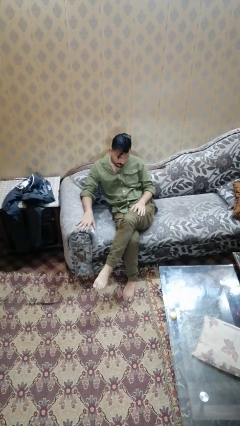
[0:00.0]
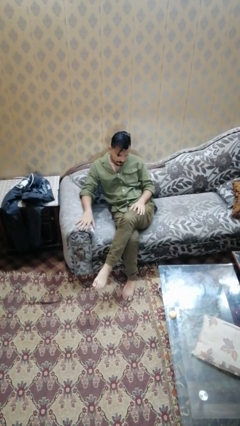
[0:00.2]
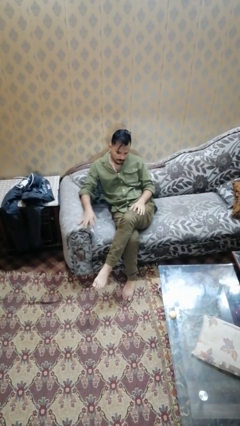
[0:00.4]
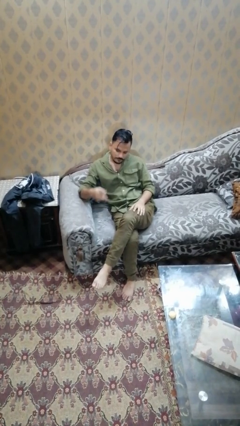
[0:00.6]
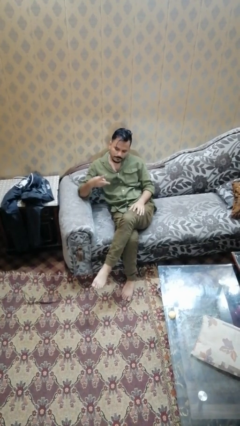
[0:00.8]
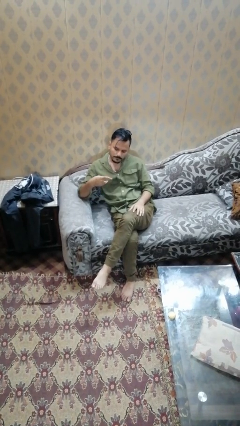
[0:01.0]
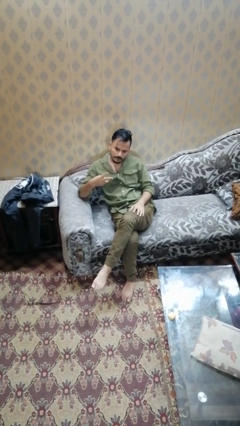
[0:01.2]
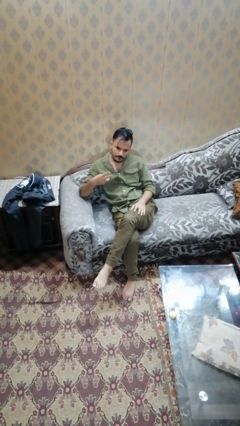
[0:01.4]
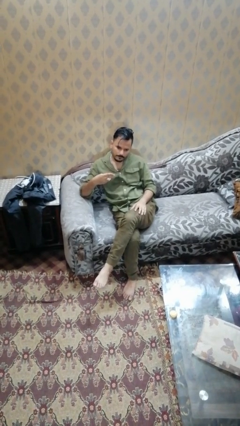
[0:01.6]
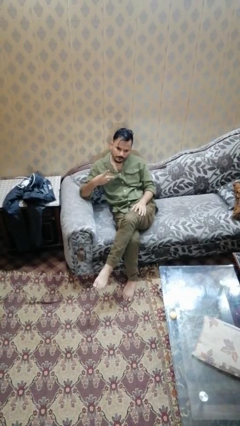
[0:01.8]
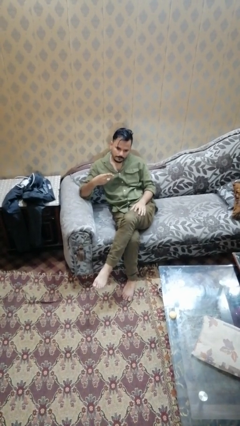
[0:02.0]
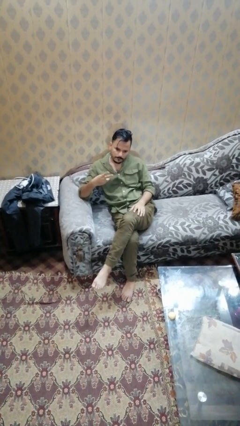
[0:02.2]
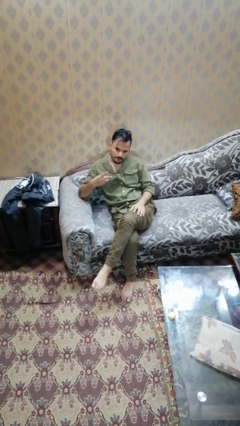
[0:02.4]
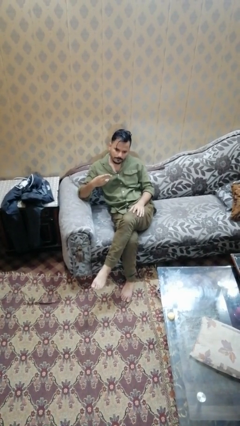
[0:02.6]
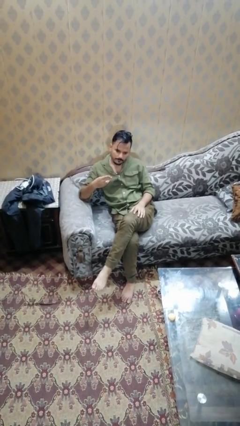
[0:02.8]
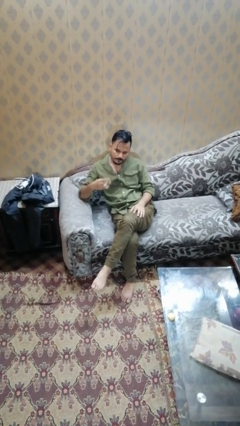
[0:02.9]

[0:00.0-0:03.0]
person gestures cut

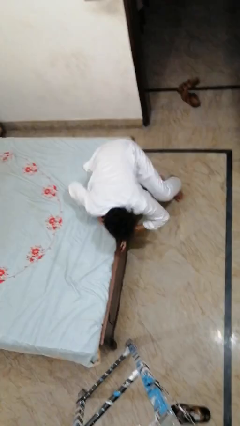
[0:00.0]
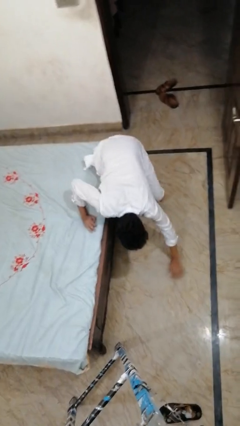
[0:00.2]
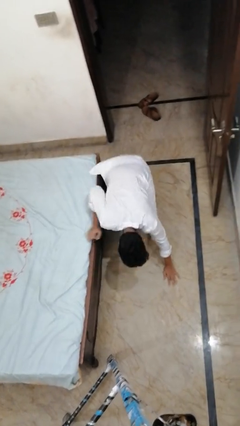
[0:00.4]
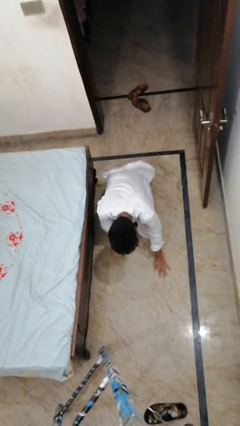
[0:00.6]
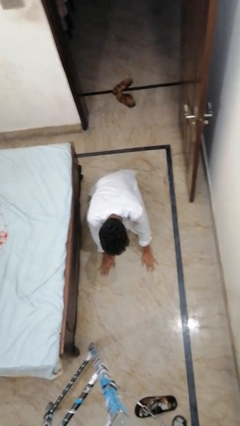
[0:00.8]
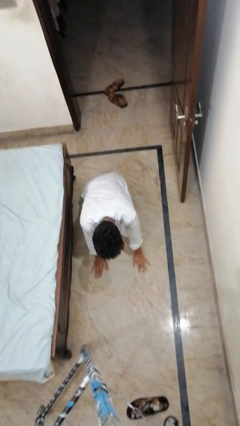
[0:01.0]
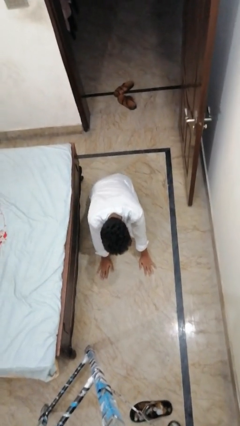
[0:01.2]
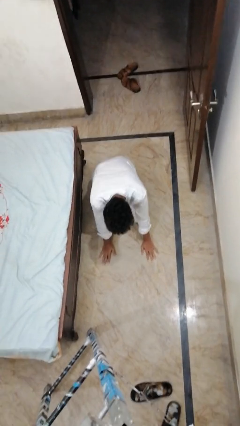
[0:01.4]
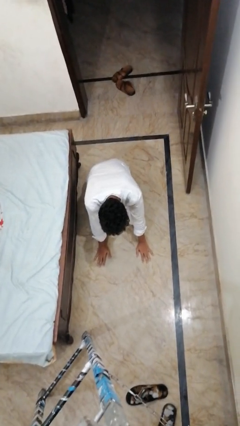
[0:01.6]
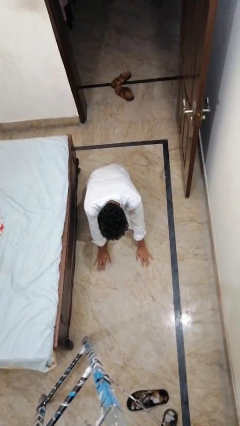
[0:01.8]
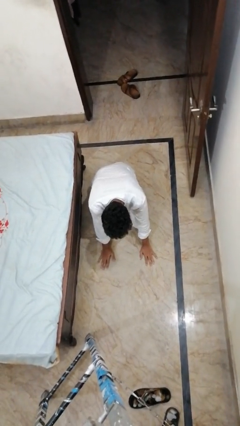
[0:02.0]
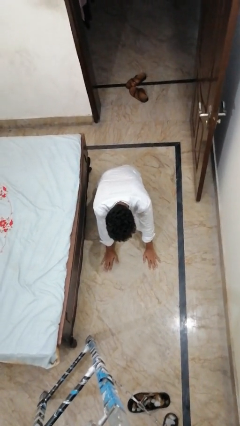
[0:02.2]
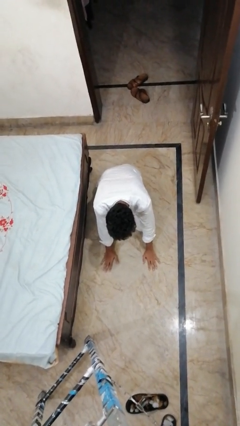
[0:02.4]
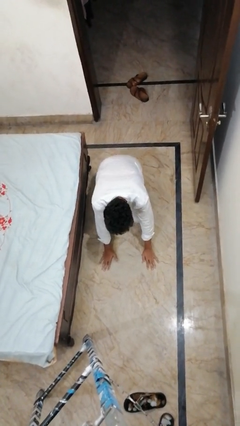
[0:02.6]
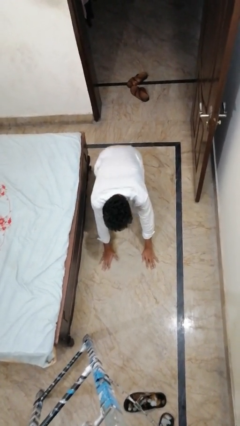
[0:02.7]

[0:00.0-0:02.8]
person falls from bed

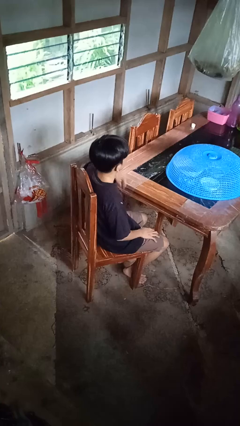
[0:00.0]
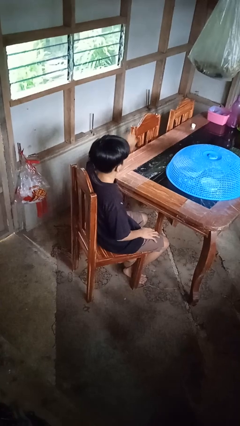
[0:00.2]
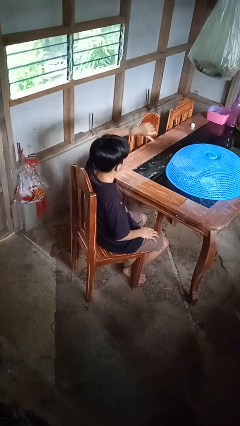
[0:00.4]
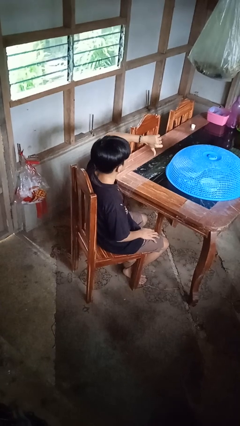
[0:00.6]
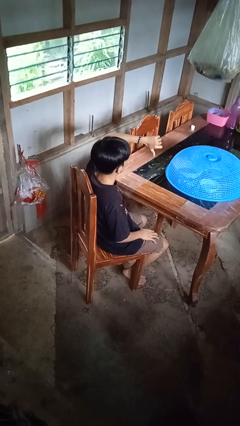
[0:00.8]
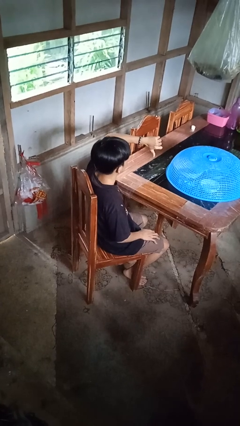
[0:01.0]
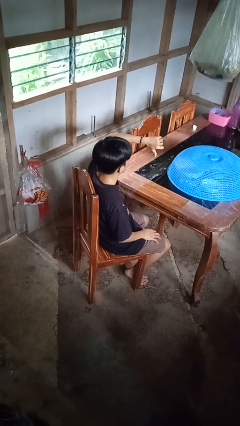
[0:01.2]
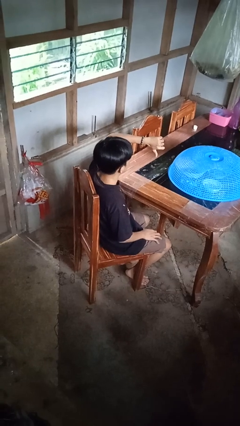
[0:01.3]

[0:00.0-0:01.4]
person gestures thumbs down

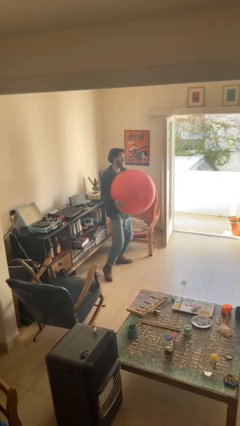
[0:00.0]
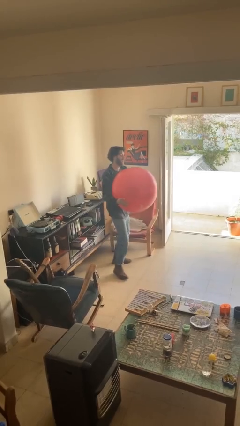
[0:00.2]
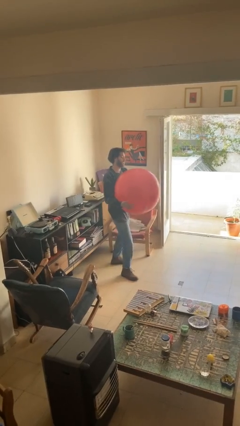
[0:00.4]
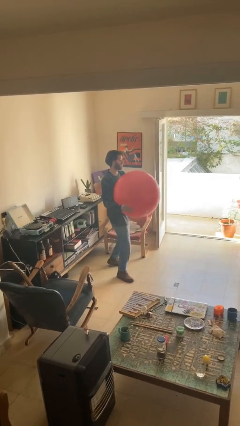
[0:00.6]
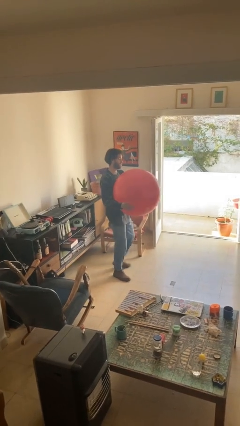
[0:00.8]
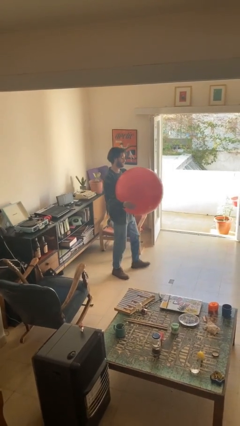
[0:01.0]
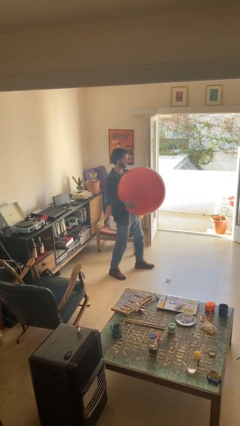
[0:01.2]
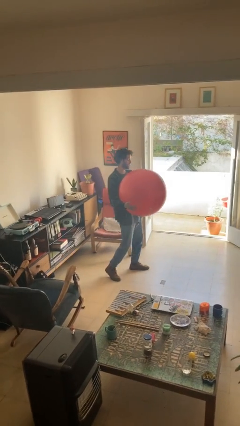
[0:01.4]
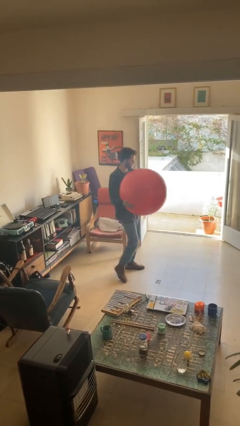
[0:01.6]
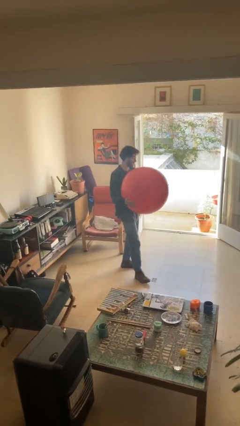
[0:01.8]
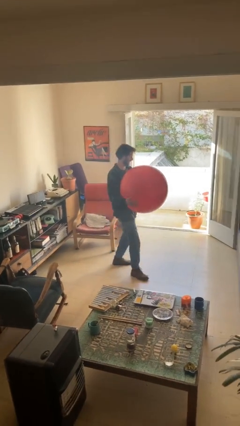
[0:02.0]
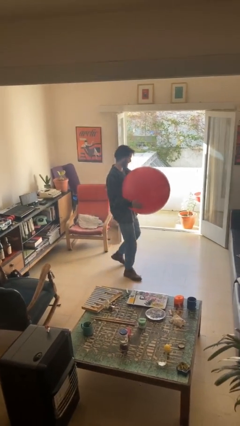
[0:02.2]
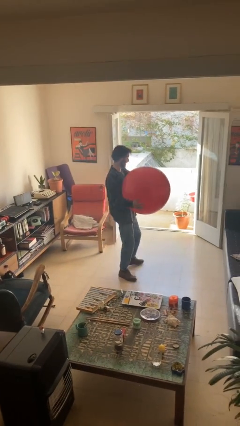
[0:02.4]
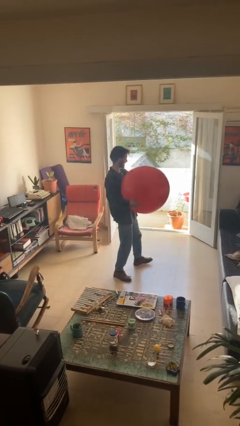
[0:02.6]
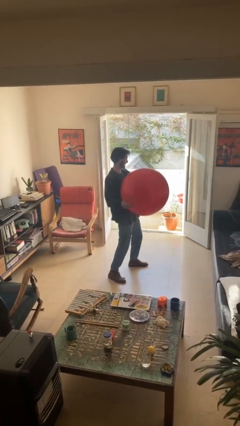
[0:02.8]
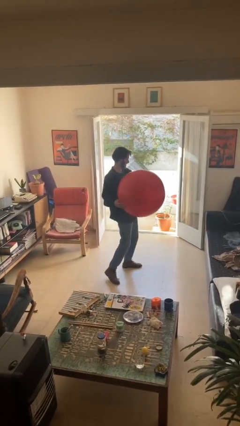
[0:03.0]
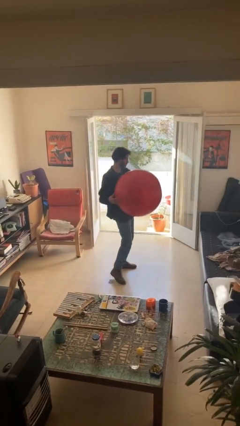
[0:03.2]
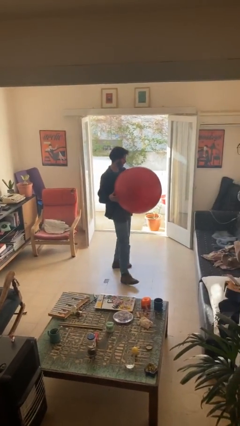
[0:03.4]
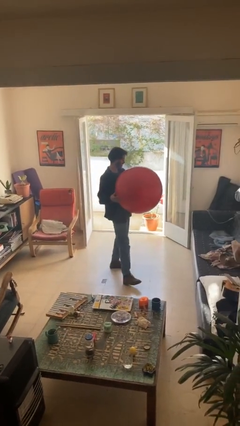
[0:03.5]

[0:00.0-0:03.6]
person carries heavy object

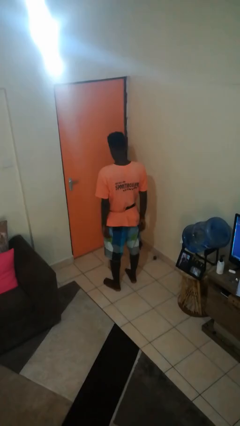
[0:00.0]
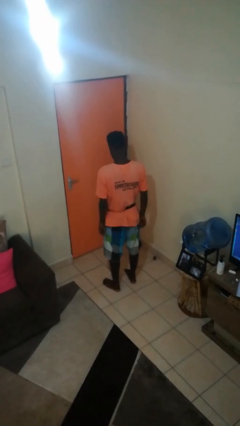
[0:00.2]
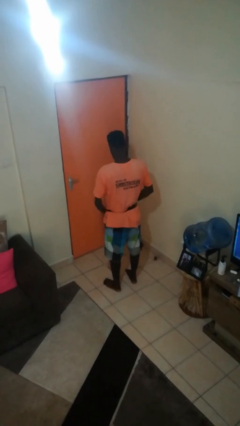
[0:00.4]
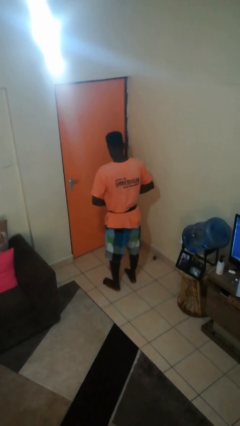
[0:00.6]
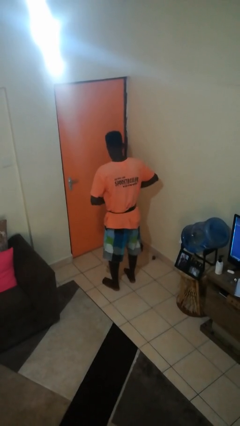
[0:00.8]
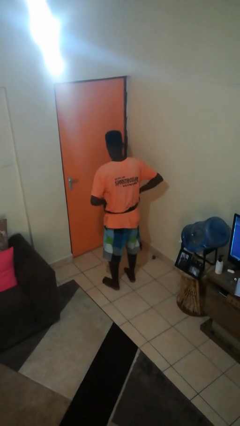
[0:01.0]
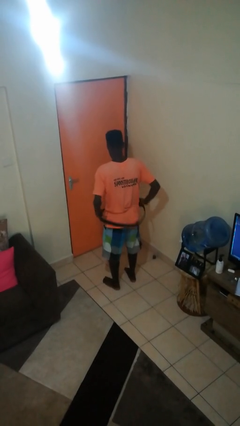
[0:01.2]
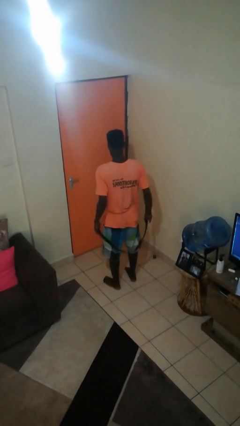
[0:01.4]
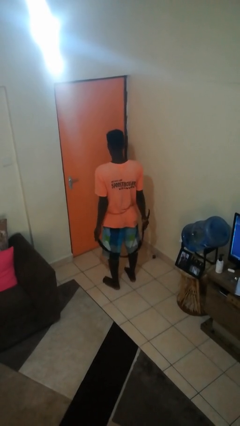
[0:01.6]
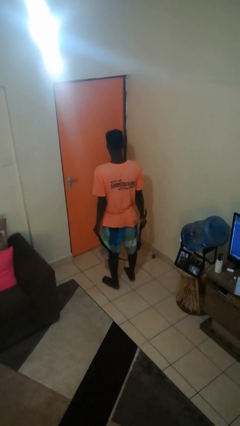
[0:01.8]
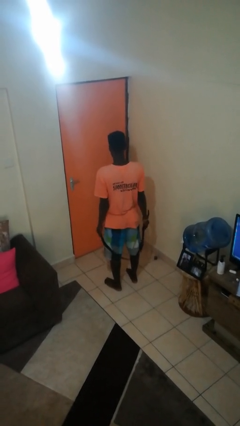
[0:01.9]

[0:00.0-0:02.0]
person takes off belt

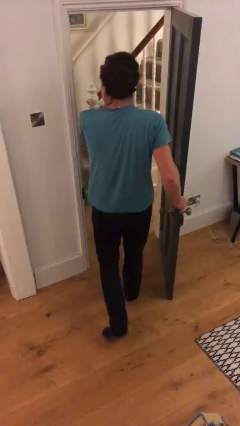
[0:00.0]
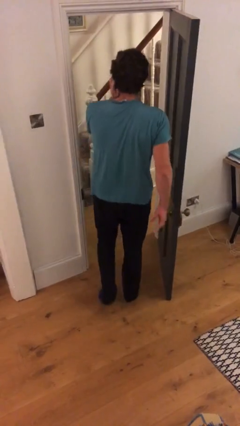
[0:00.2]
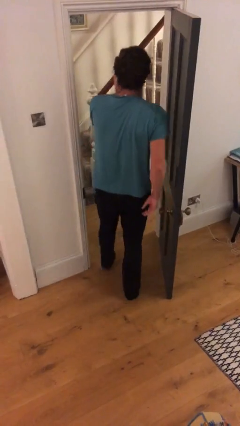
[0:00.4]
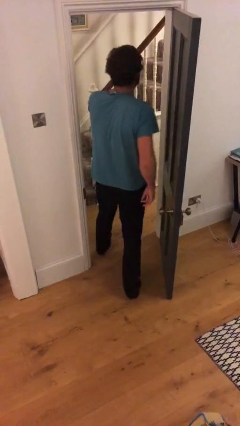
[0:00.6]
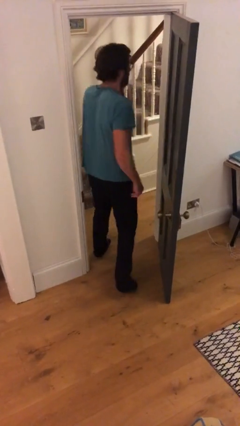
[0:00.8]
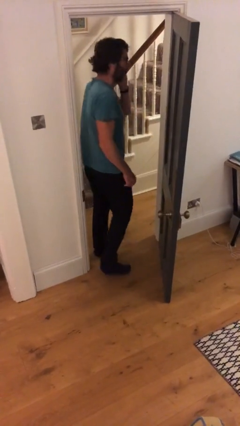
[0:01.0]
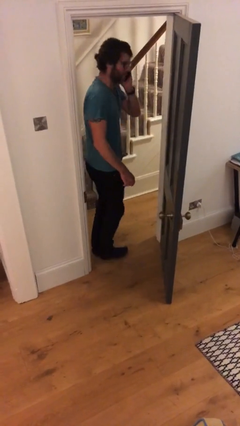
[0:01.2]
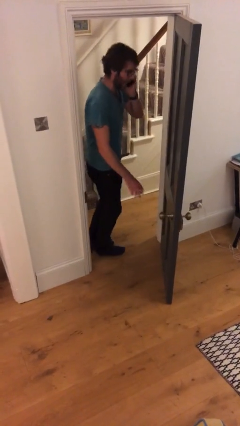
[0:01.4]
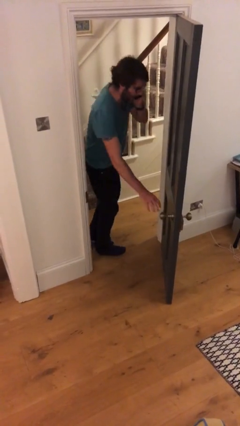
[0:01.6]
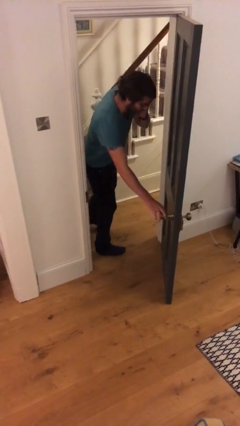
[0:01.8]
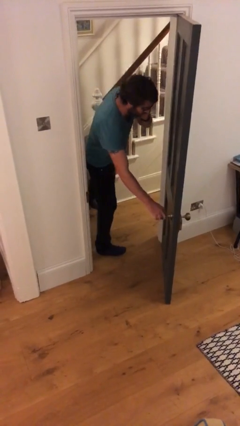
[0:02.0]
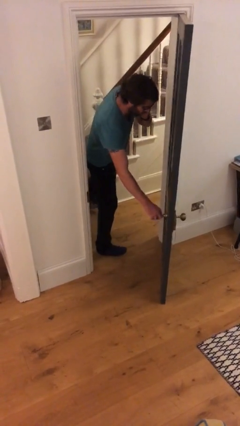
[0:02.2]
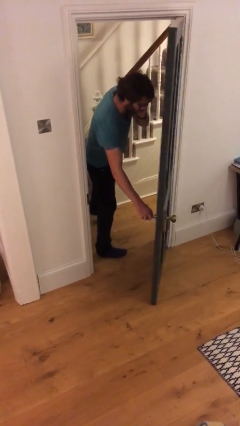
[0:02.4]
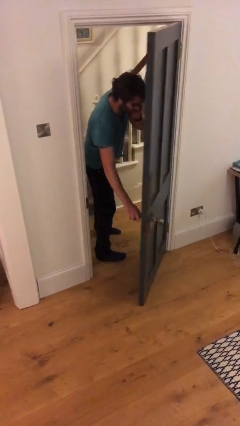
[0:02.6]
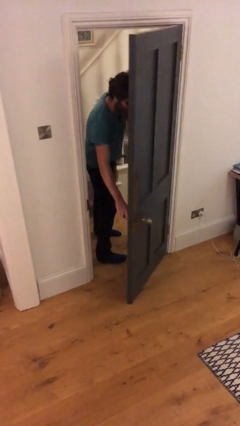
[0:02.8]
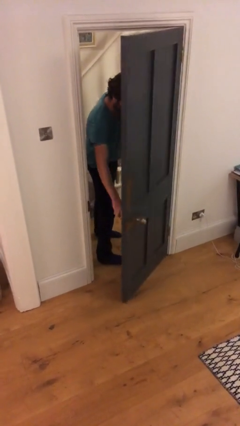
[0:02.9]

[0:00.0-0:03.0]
person exits scene through structure

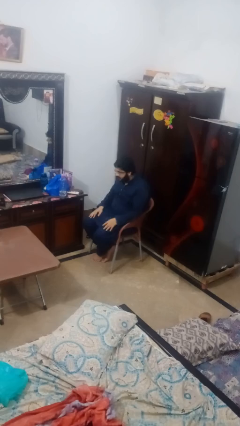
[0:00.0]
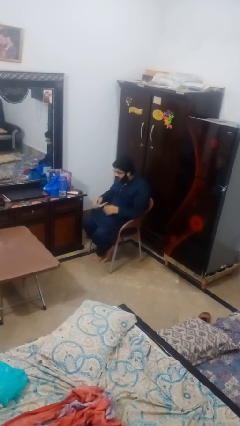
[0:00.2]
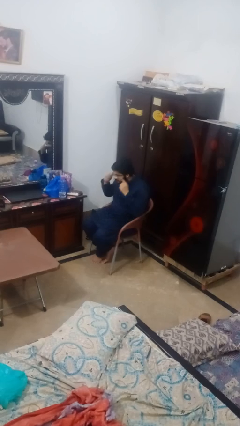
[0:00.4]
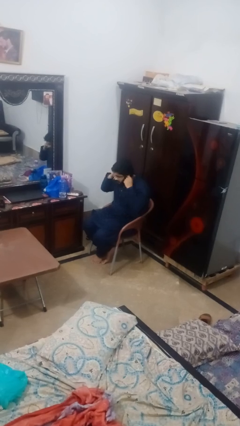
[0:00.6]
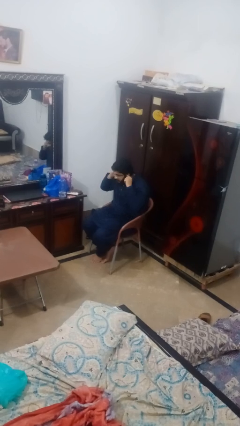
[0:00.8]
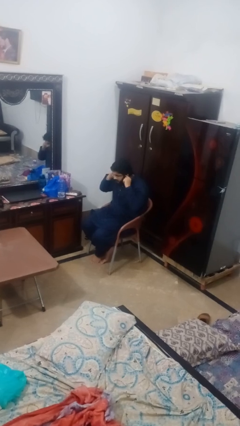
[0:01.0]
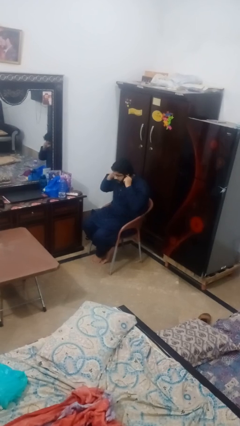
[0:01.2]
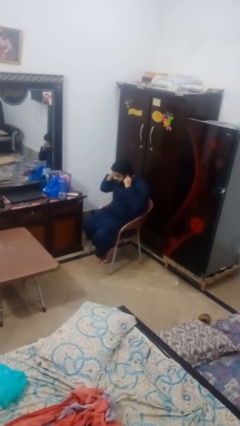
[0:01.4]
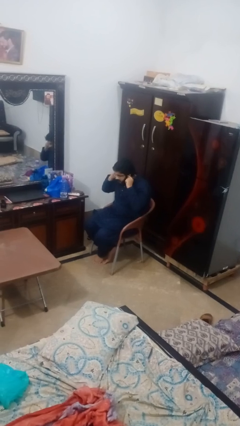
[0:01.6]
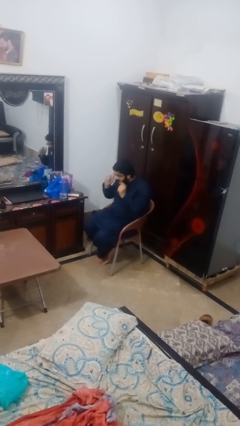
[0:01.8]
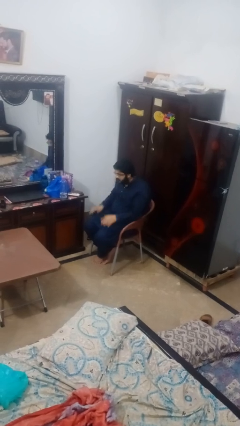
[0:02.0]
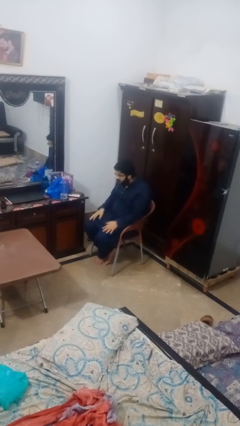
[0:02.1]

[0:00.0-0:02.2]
person puts fingers in ear
